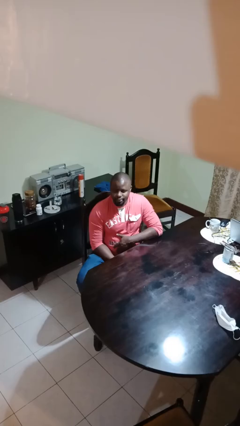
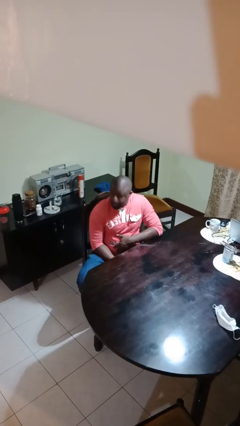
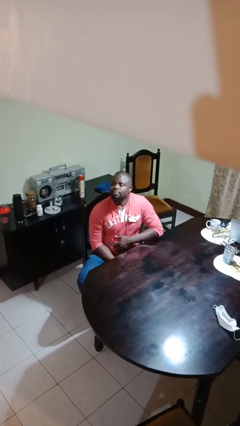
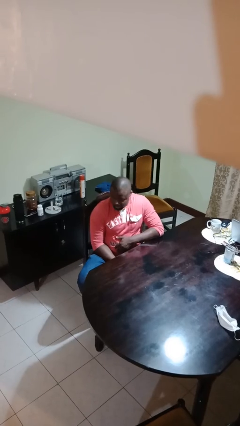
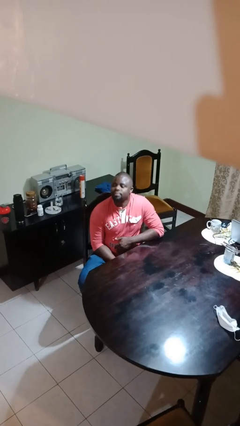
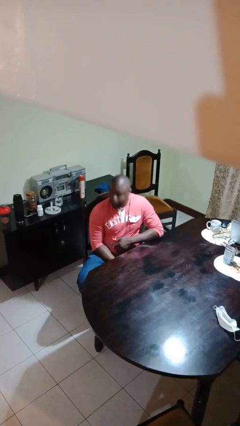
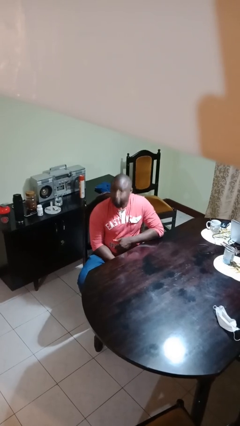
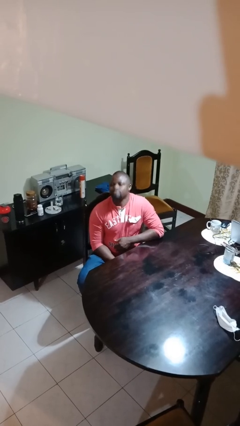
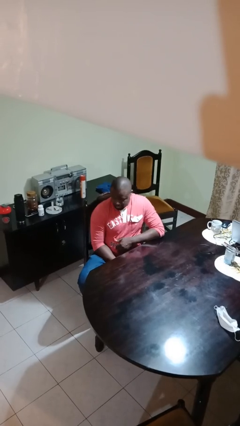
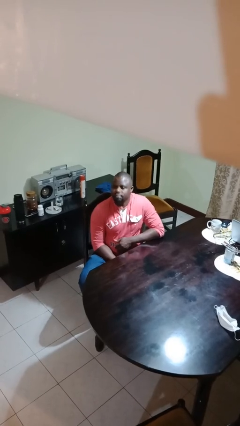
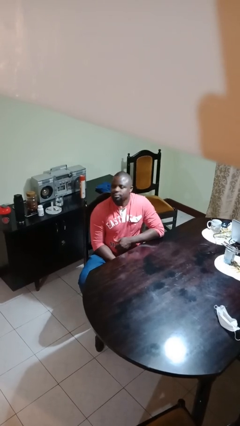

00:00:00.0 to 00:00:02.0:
person nods head

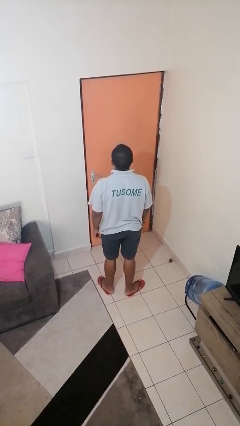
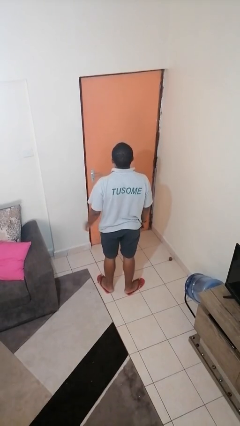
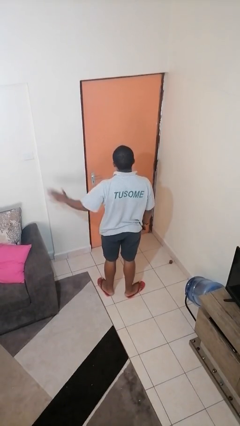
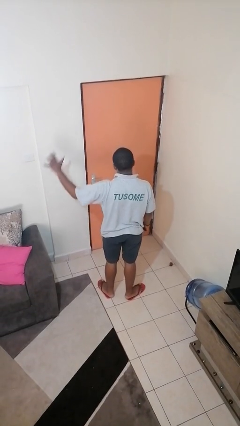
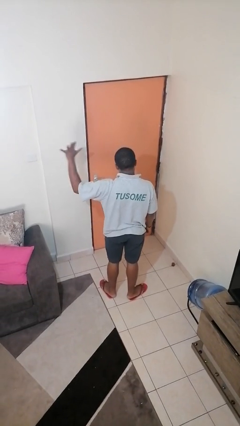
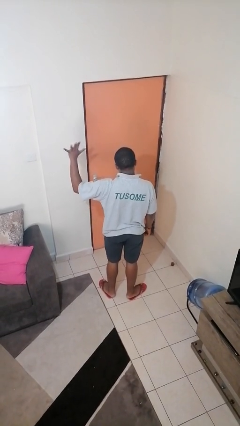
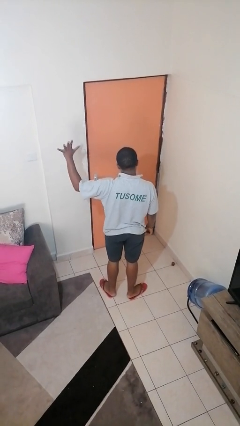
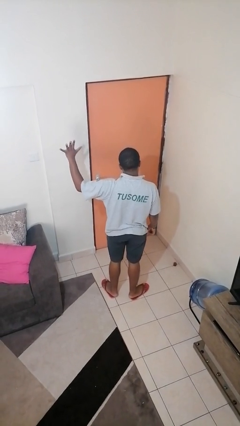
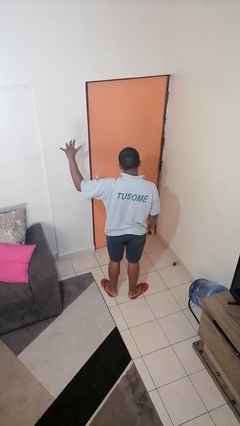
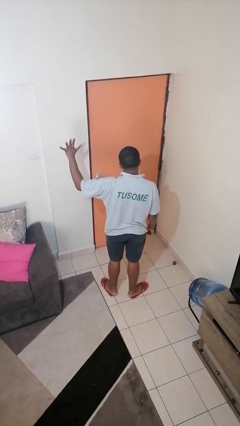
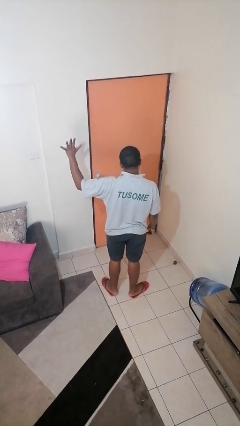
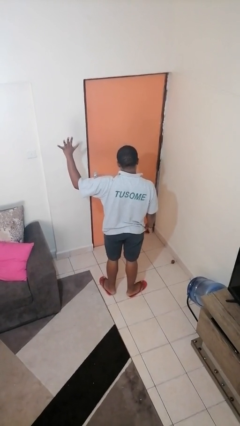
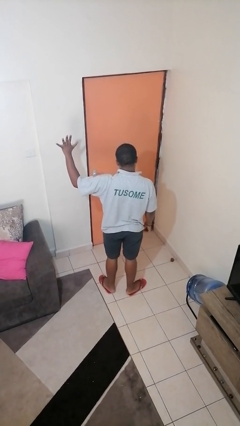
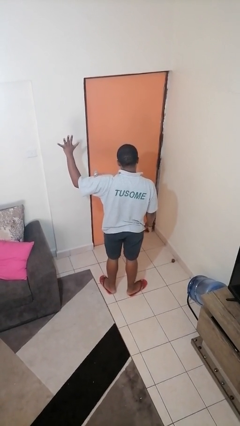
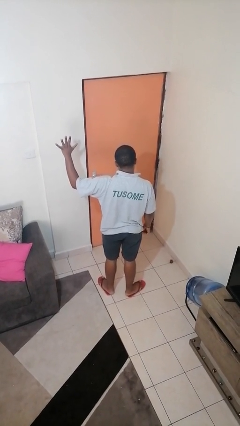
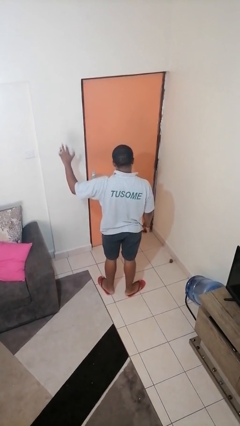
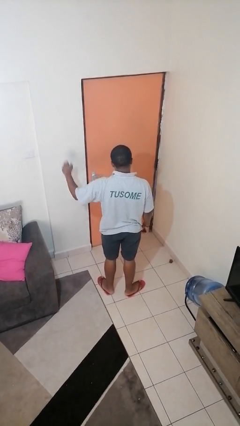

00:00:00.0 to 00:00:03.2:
person gestures number five

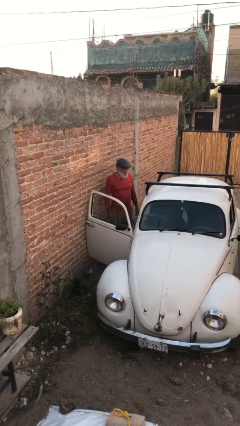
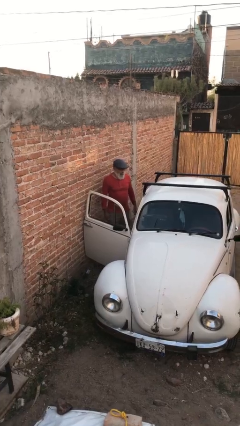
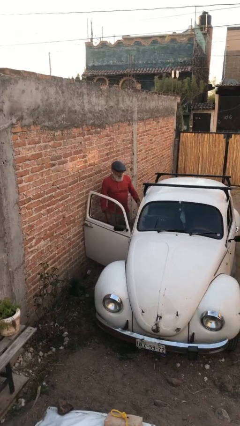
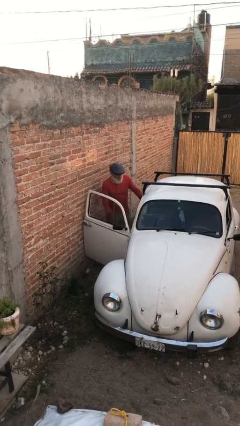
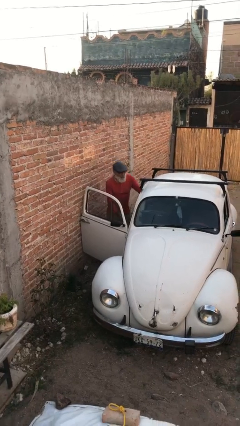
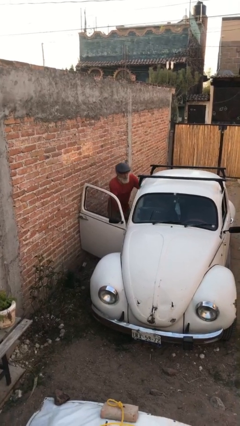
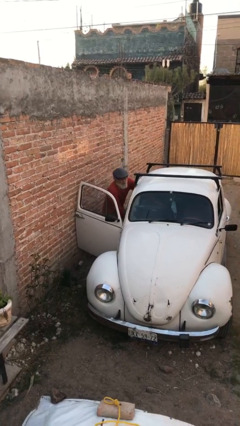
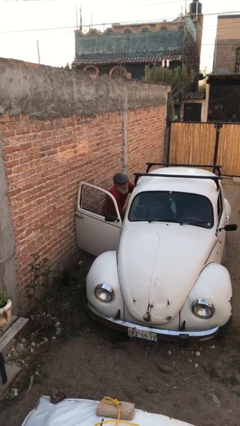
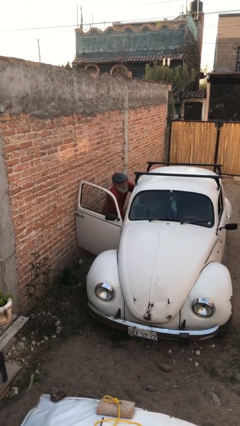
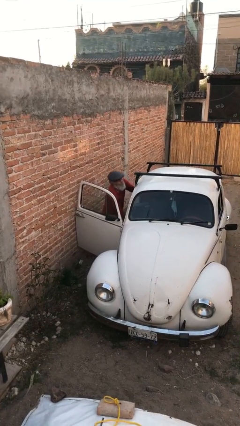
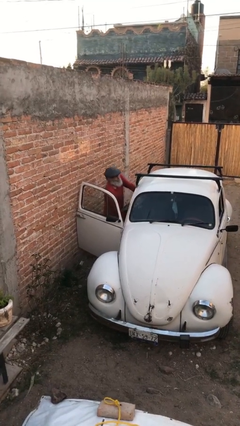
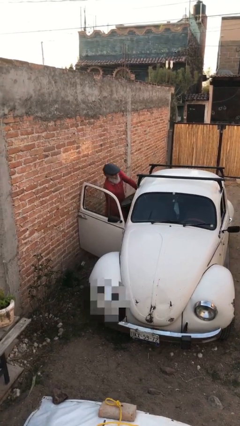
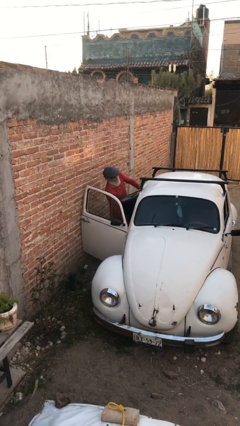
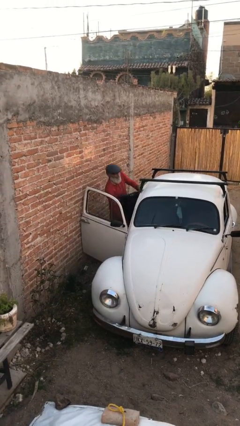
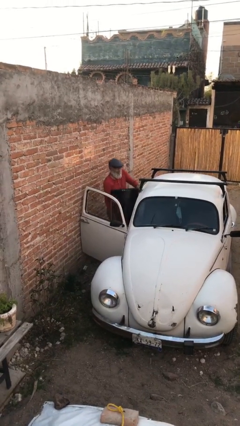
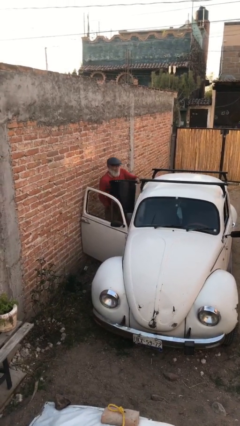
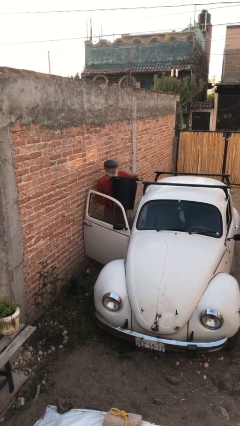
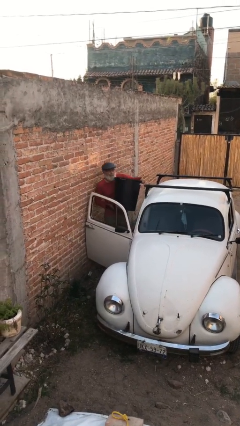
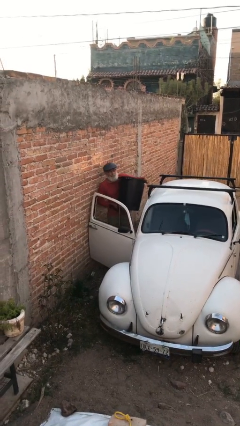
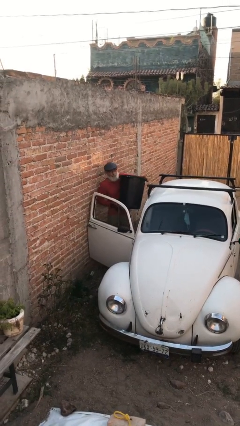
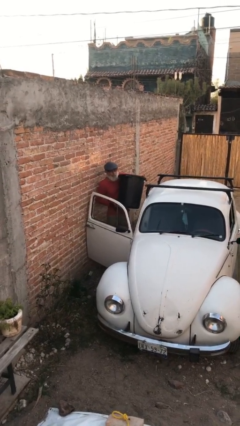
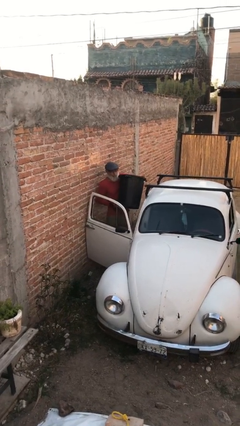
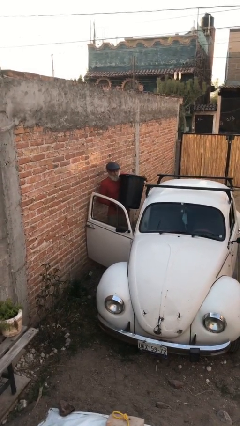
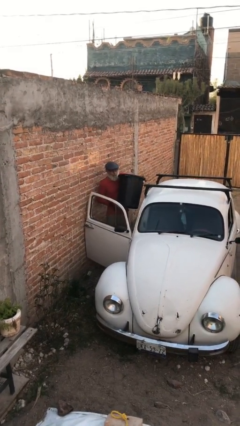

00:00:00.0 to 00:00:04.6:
person unloads car

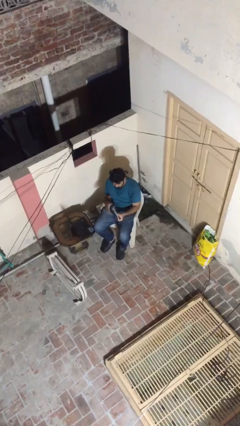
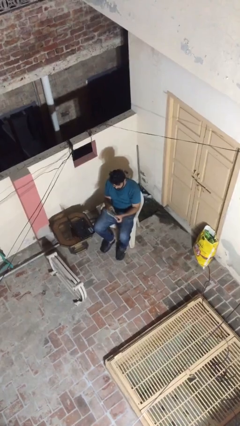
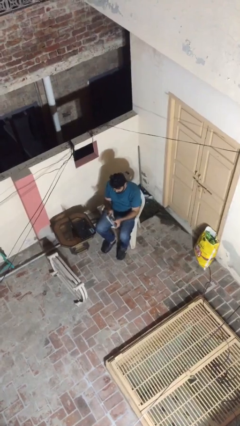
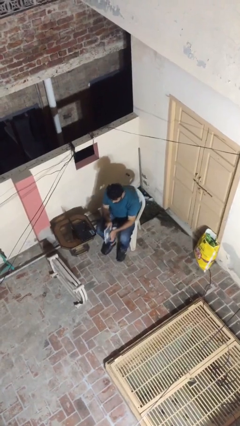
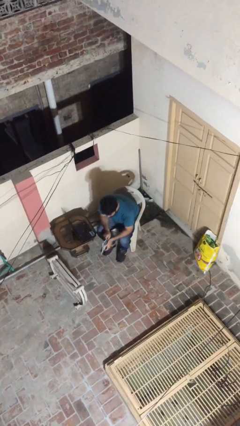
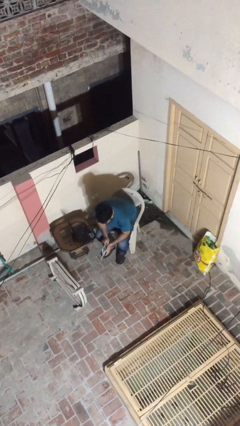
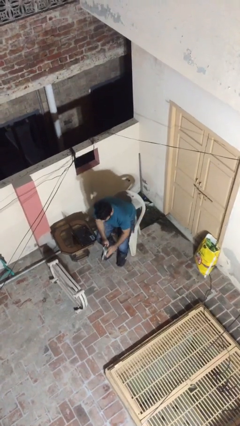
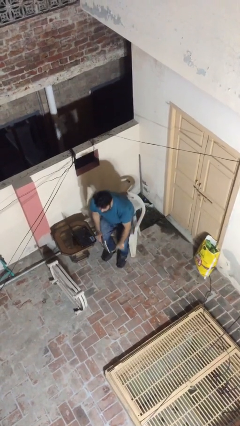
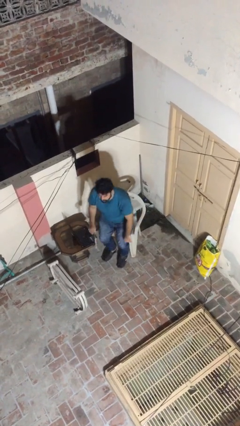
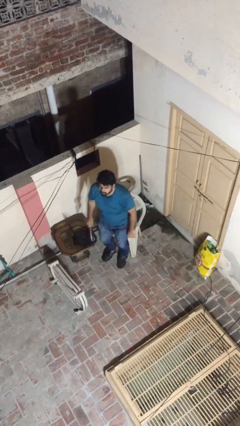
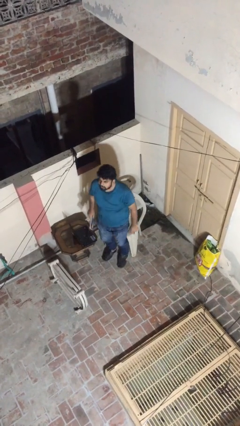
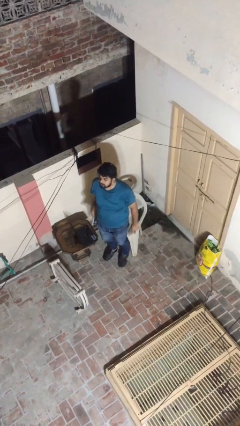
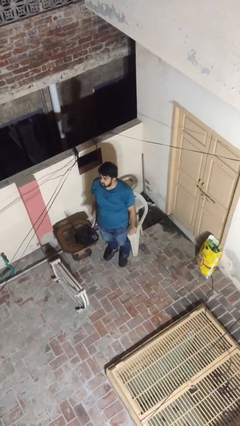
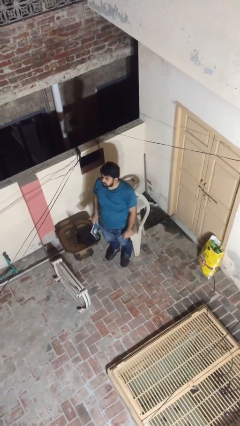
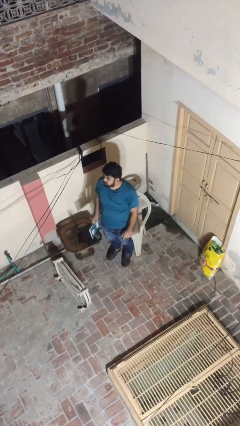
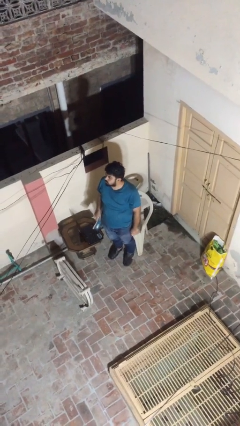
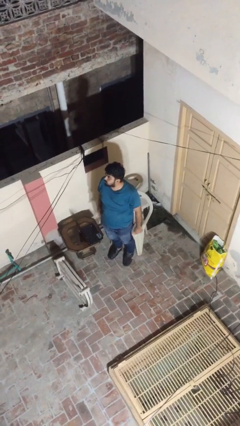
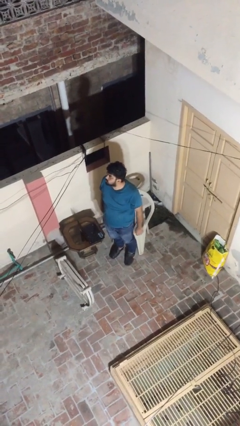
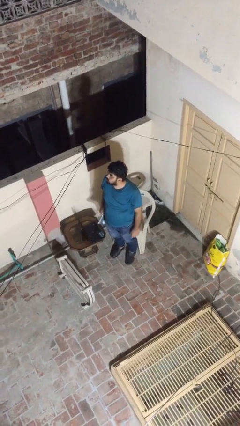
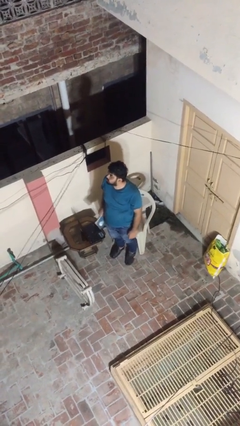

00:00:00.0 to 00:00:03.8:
person stands up

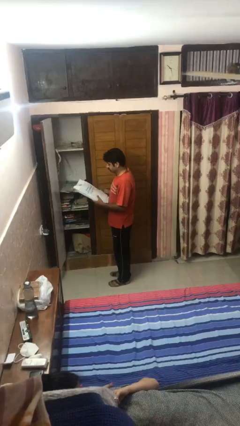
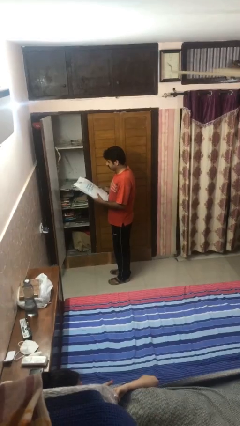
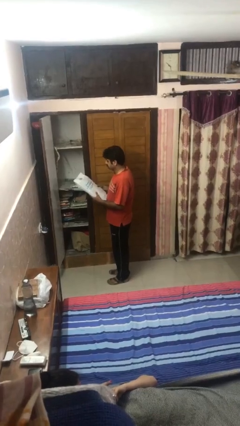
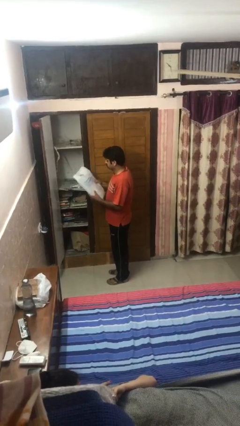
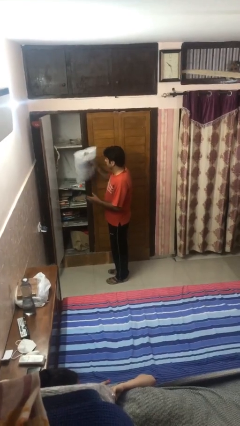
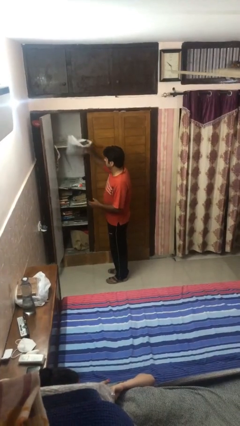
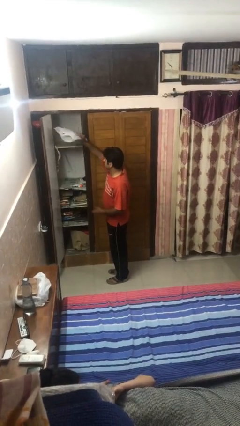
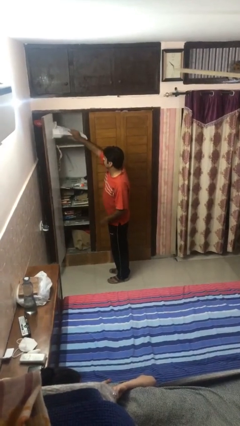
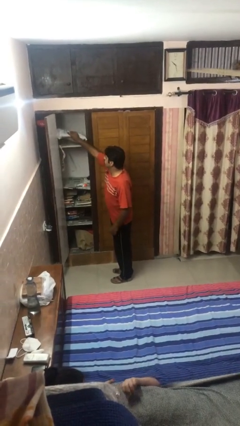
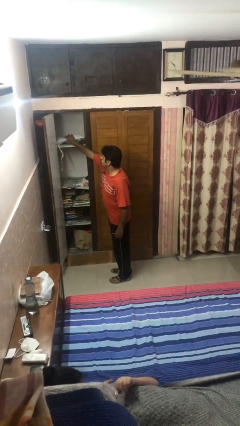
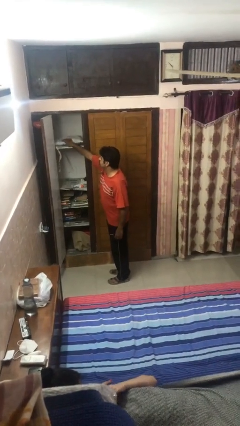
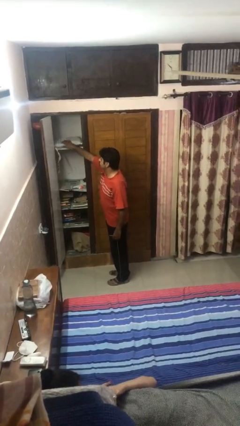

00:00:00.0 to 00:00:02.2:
person puts down object on shelf

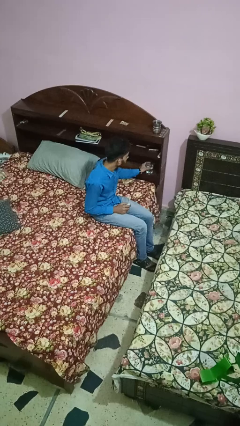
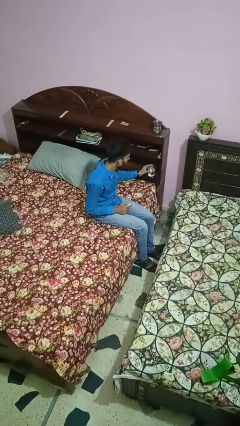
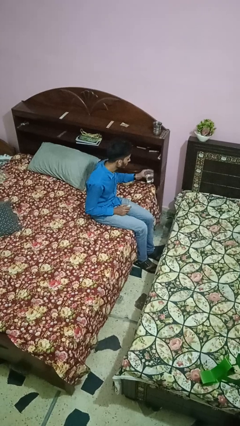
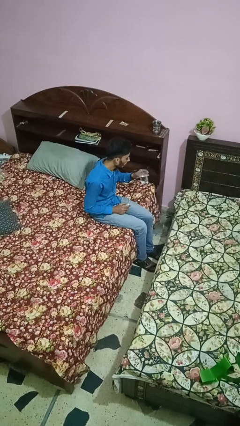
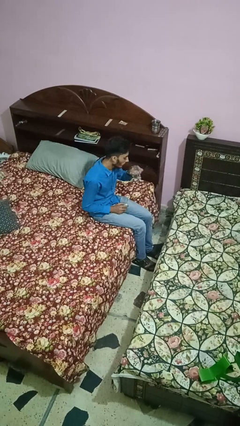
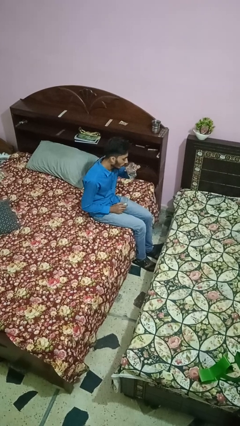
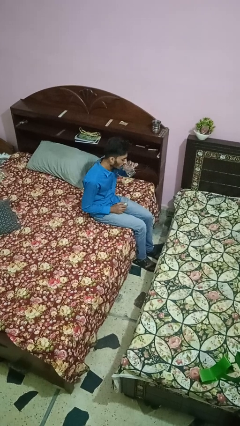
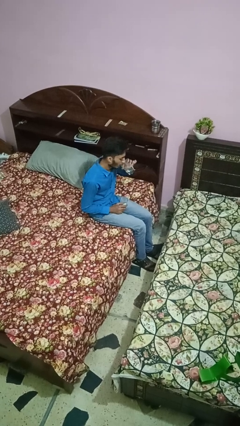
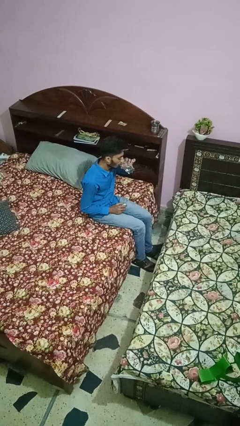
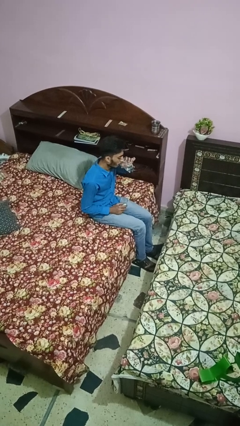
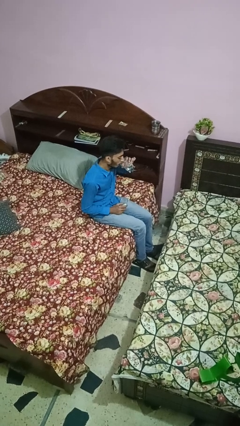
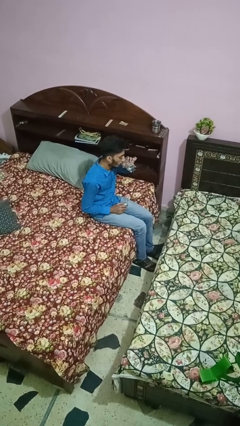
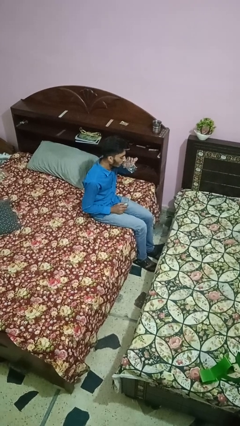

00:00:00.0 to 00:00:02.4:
person drinks from cup
